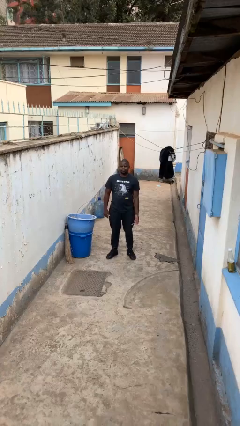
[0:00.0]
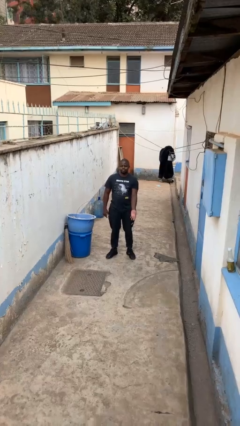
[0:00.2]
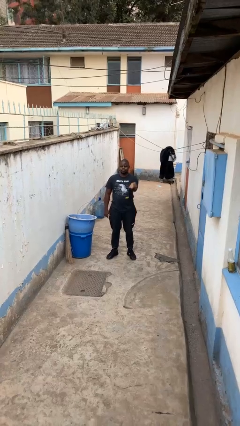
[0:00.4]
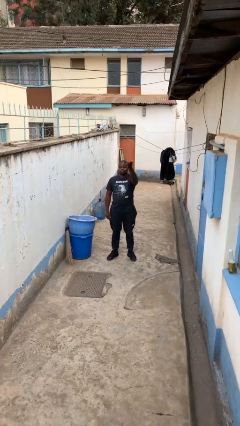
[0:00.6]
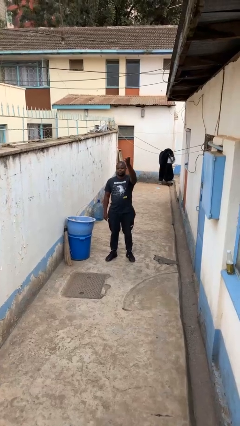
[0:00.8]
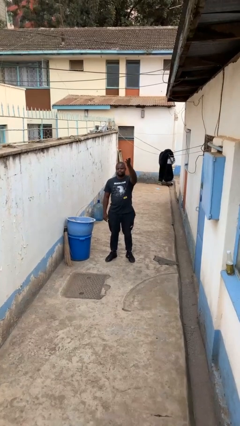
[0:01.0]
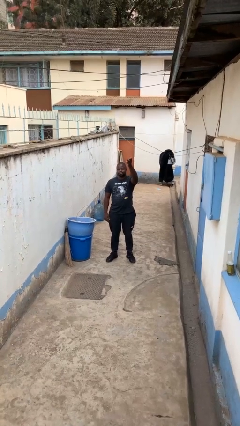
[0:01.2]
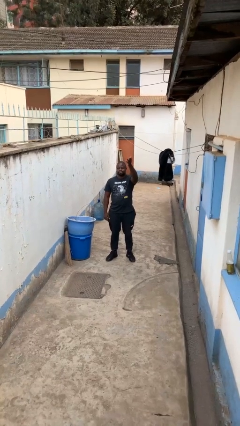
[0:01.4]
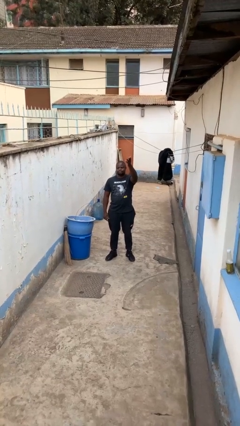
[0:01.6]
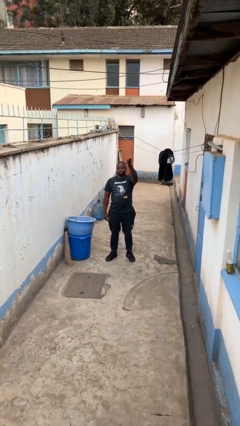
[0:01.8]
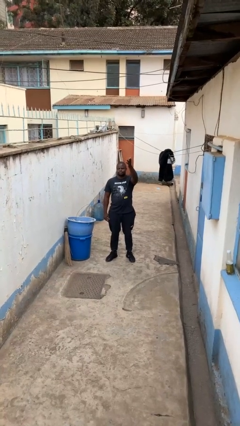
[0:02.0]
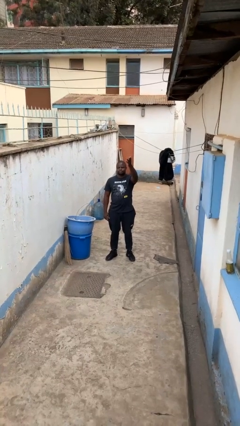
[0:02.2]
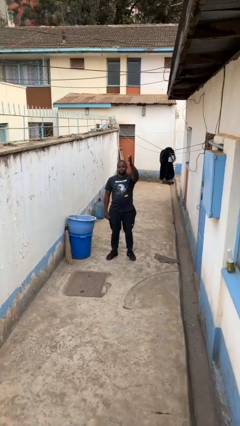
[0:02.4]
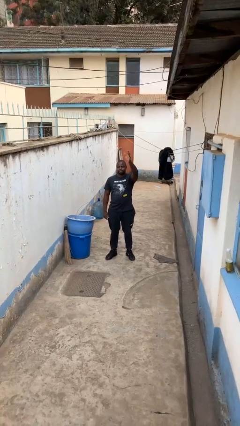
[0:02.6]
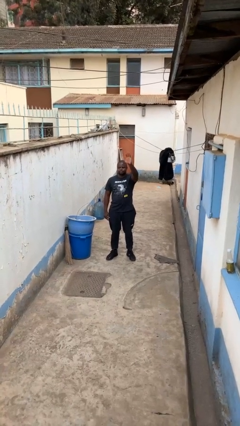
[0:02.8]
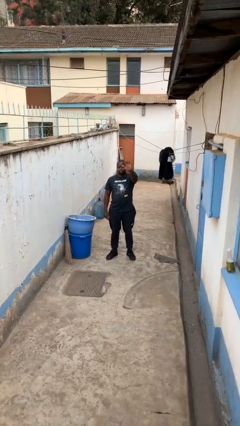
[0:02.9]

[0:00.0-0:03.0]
person gestures swipe up

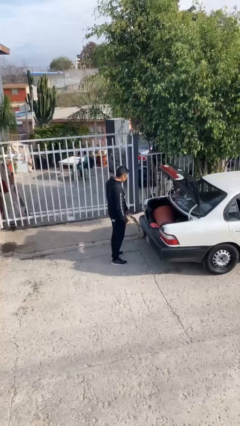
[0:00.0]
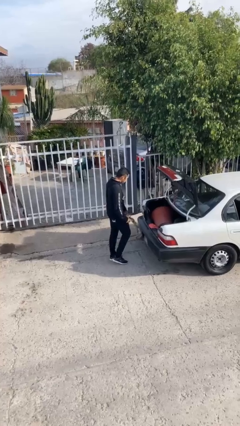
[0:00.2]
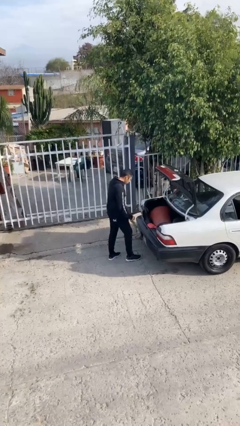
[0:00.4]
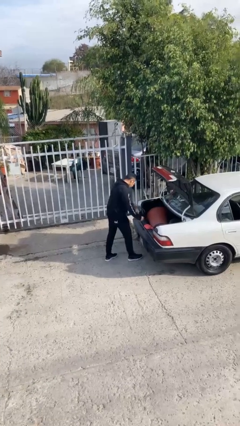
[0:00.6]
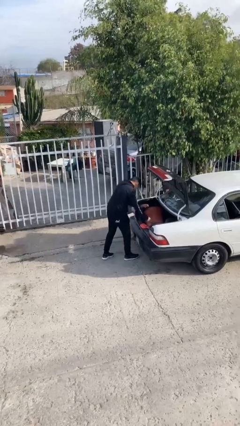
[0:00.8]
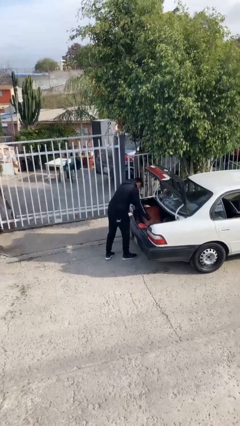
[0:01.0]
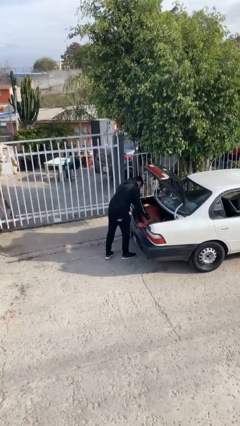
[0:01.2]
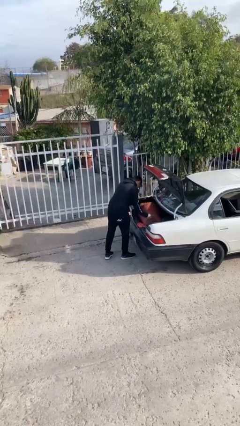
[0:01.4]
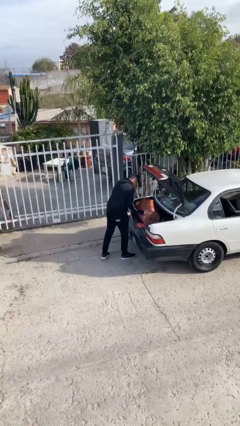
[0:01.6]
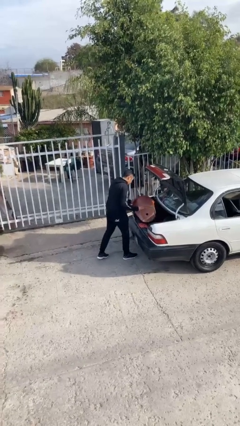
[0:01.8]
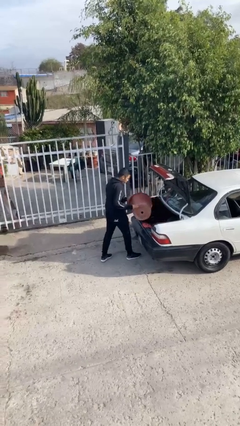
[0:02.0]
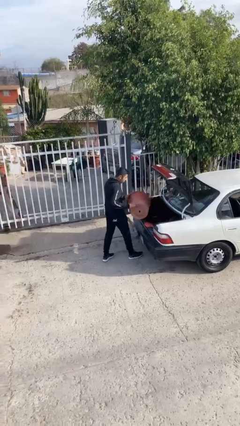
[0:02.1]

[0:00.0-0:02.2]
person unloads car

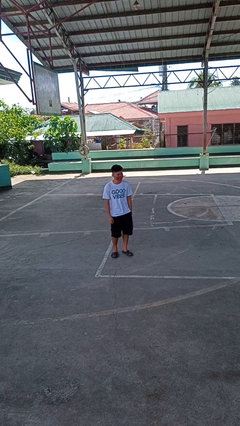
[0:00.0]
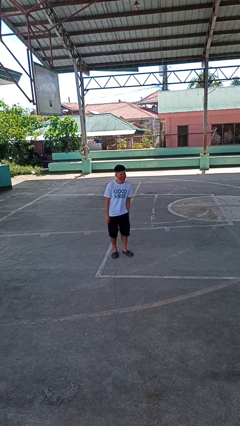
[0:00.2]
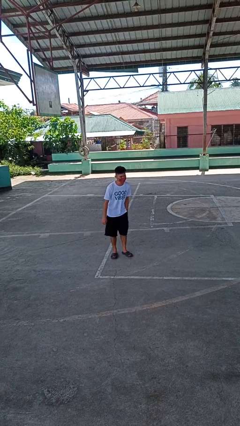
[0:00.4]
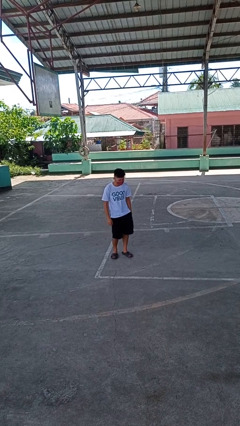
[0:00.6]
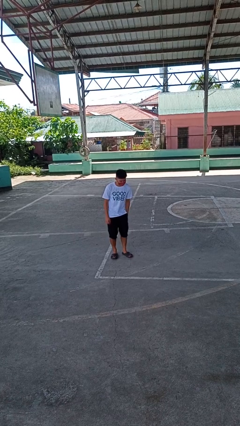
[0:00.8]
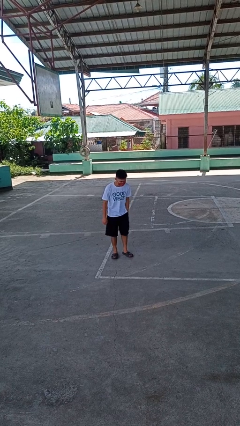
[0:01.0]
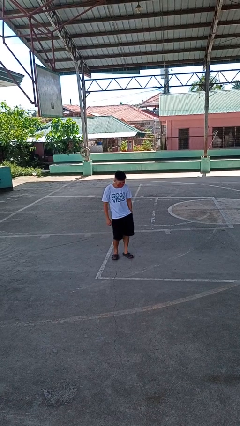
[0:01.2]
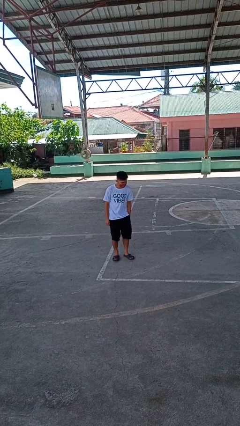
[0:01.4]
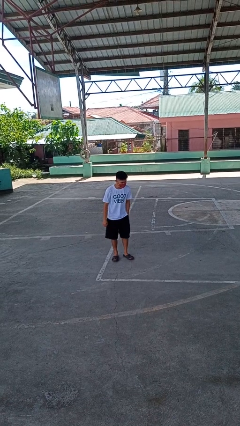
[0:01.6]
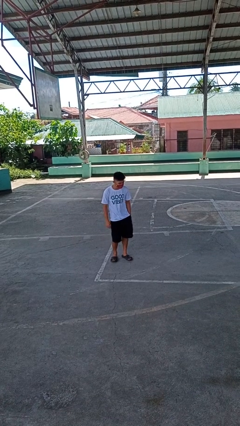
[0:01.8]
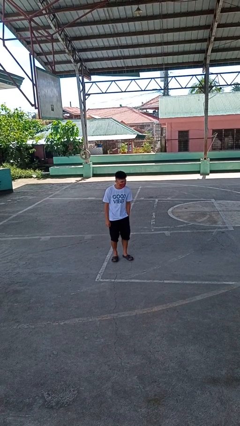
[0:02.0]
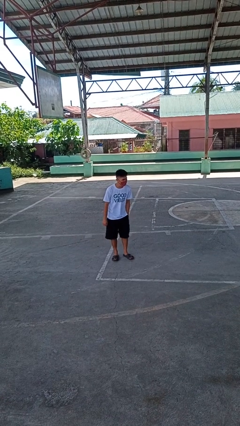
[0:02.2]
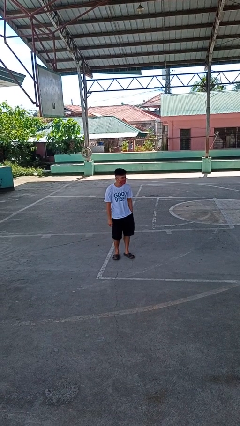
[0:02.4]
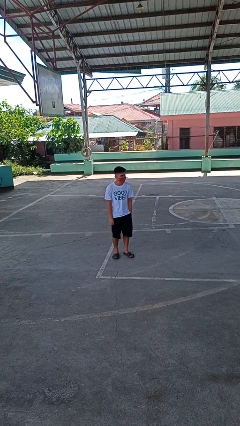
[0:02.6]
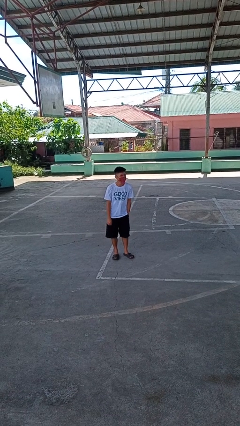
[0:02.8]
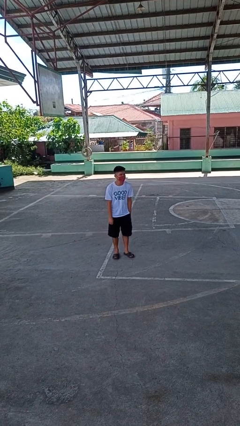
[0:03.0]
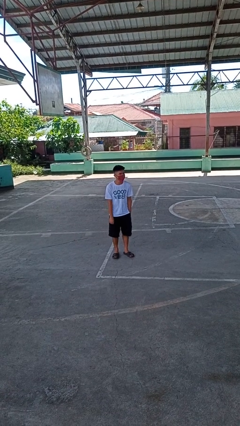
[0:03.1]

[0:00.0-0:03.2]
person wiggles hips

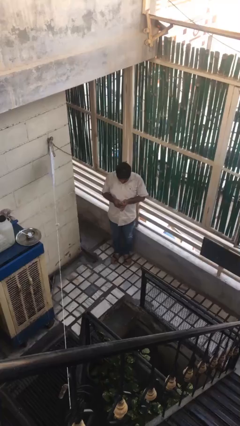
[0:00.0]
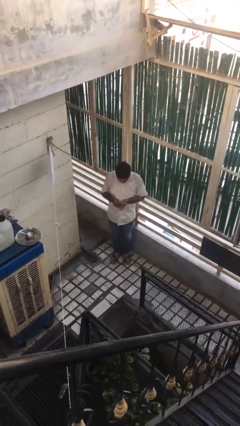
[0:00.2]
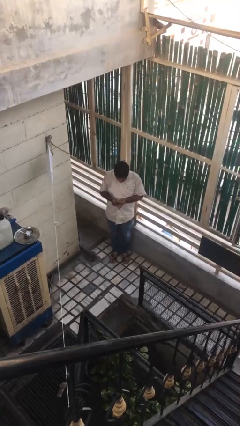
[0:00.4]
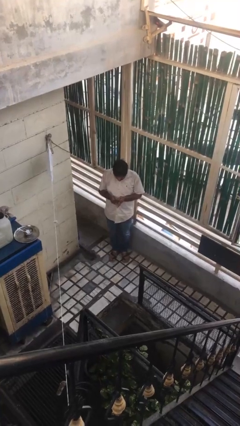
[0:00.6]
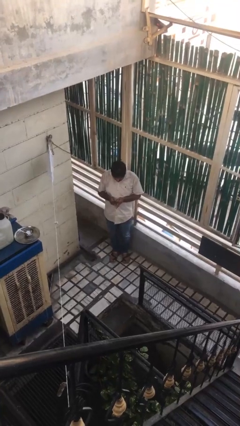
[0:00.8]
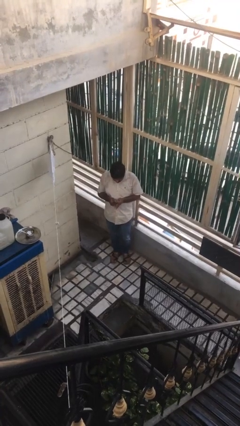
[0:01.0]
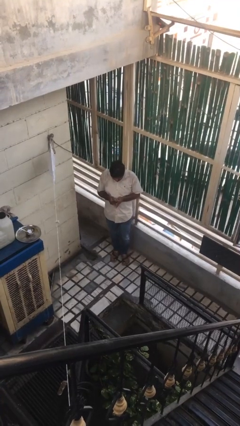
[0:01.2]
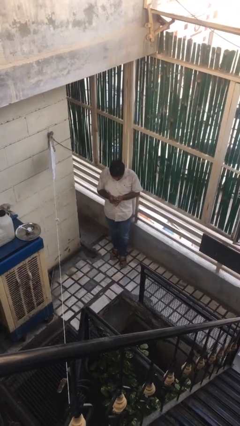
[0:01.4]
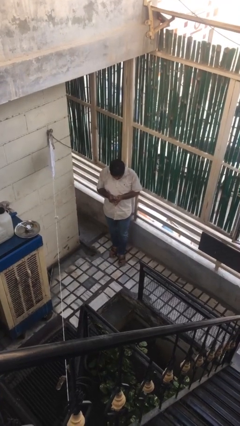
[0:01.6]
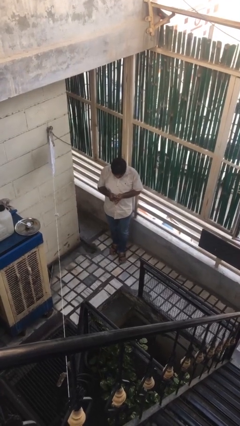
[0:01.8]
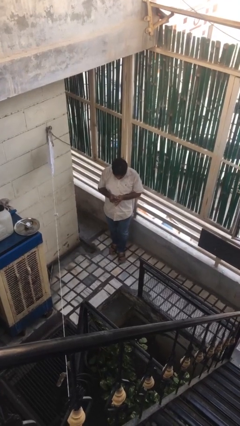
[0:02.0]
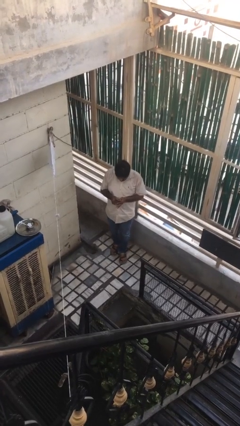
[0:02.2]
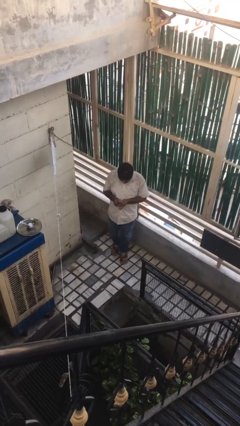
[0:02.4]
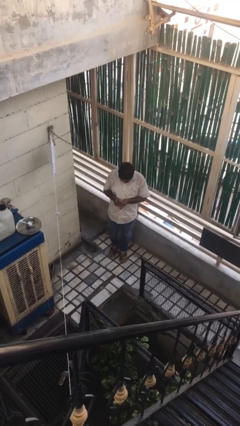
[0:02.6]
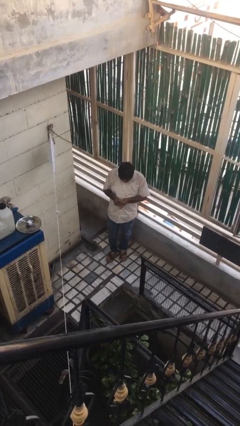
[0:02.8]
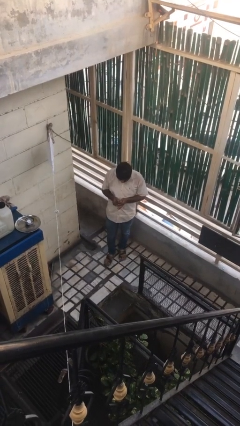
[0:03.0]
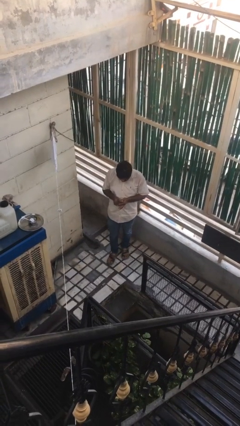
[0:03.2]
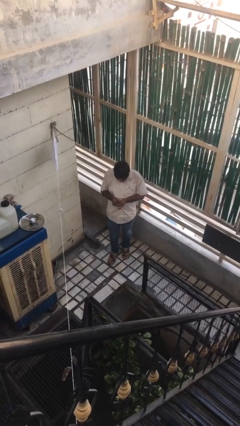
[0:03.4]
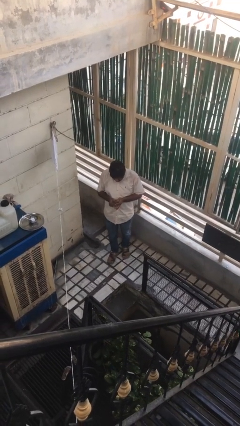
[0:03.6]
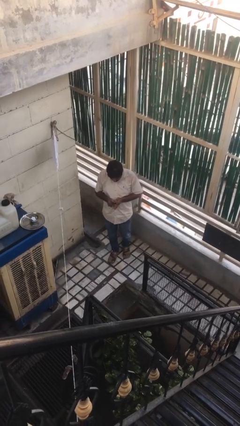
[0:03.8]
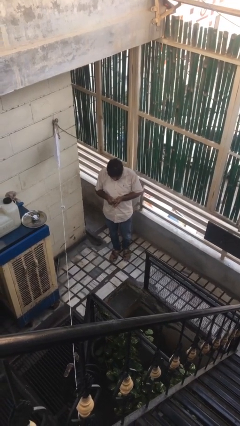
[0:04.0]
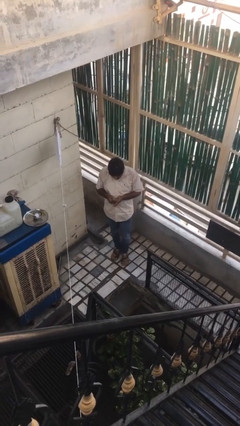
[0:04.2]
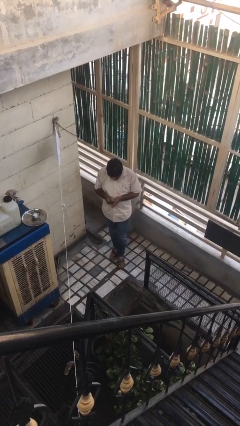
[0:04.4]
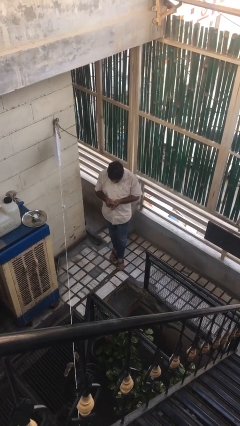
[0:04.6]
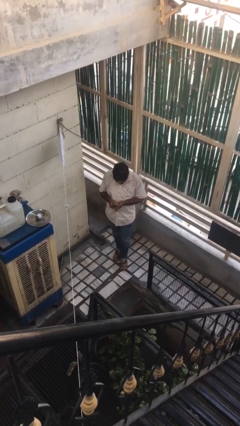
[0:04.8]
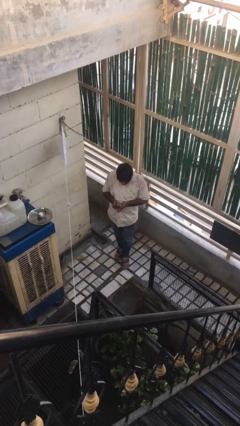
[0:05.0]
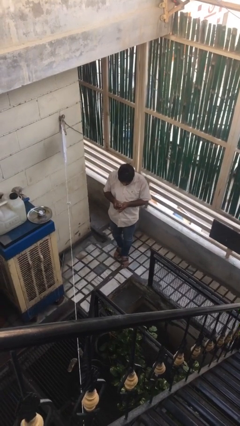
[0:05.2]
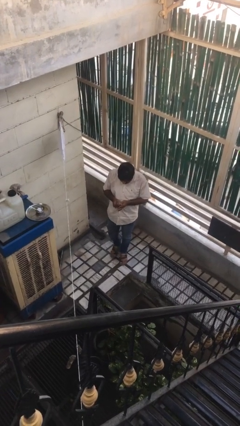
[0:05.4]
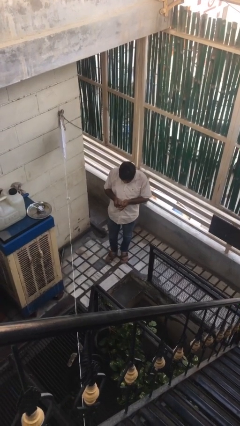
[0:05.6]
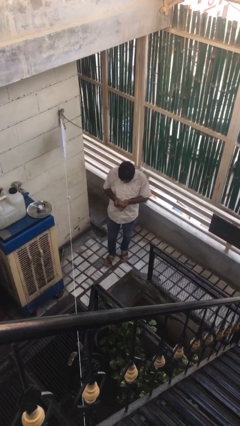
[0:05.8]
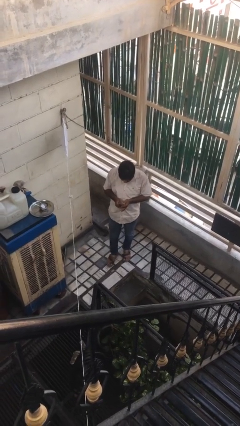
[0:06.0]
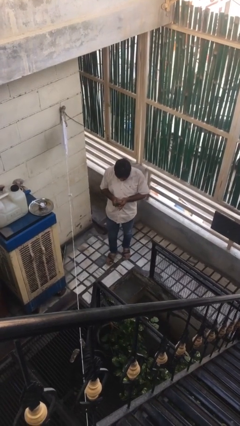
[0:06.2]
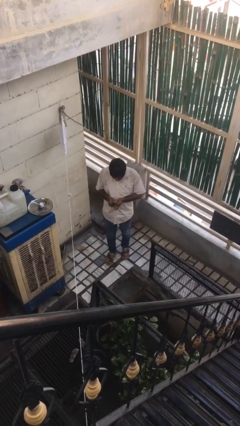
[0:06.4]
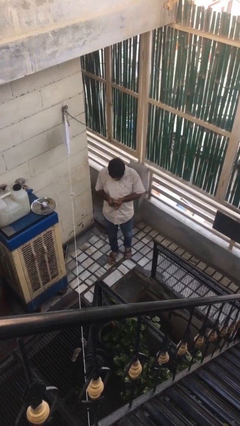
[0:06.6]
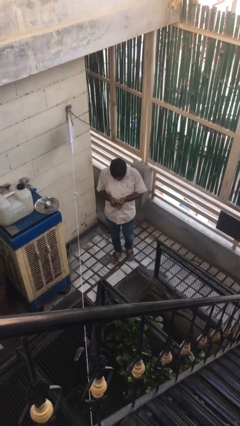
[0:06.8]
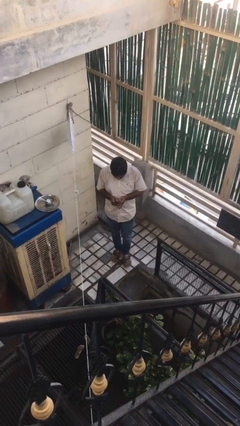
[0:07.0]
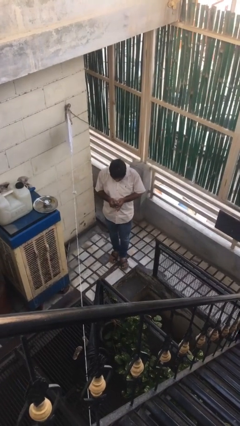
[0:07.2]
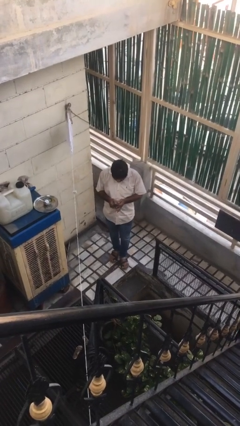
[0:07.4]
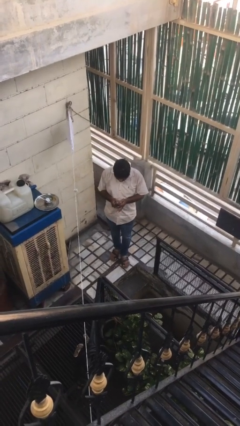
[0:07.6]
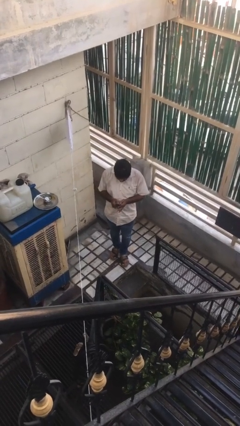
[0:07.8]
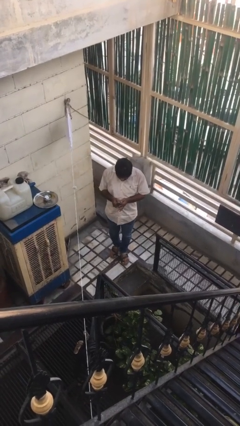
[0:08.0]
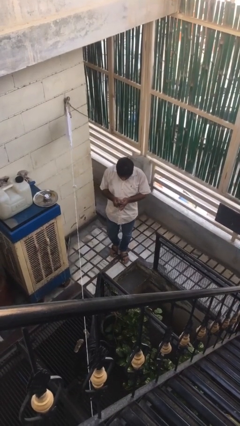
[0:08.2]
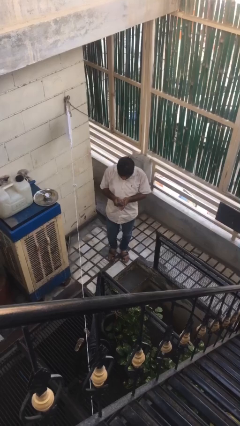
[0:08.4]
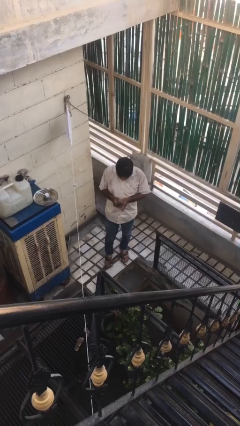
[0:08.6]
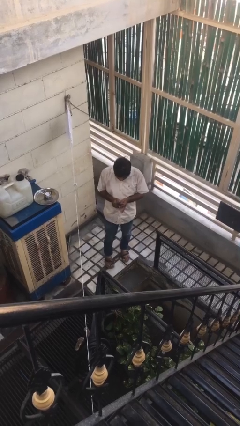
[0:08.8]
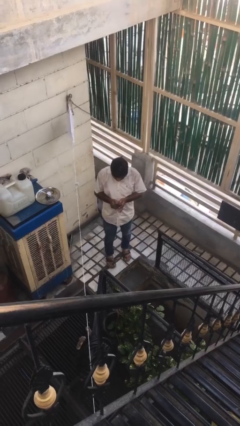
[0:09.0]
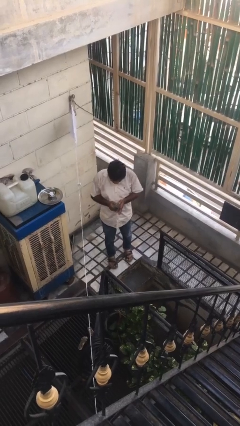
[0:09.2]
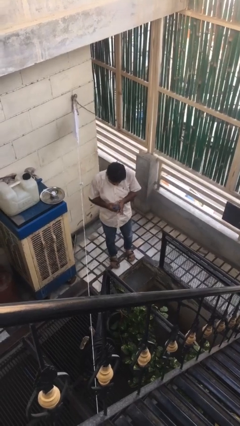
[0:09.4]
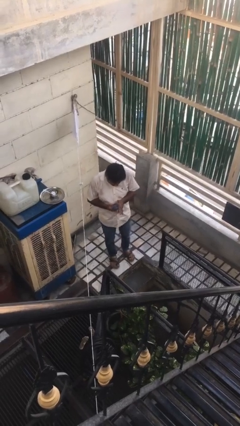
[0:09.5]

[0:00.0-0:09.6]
person texts on phone
